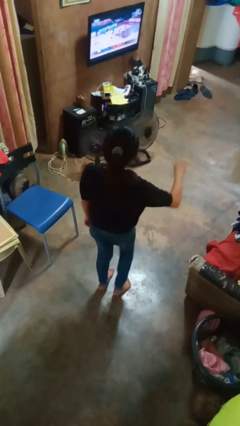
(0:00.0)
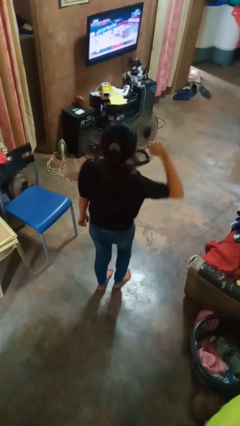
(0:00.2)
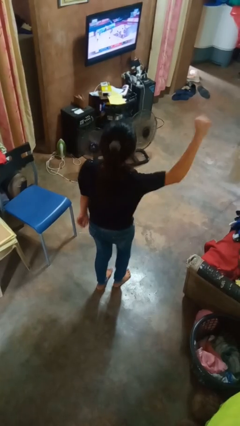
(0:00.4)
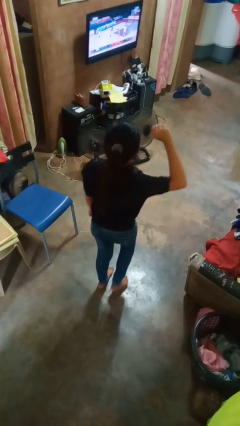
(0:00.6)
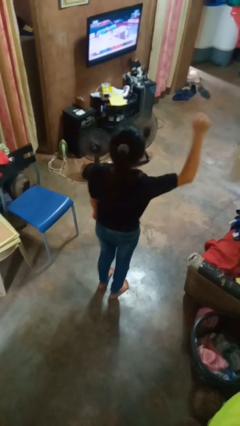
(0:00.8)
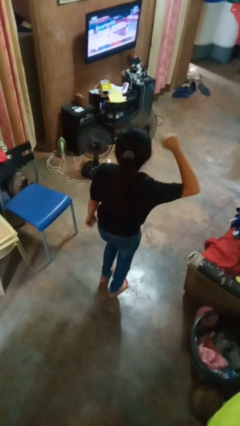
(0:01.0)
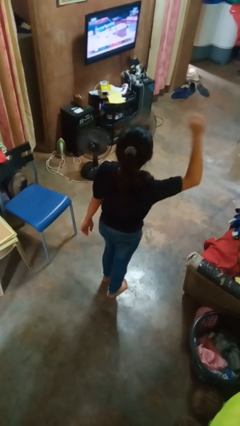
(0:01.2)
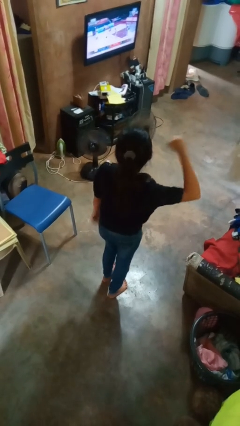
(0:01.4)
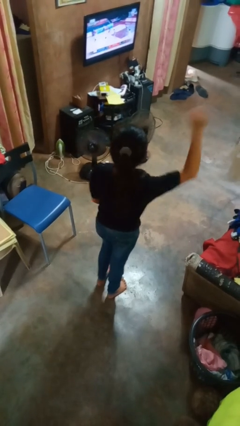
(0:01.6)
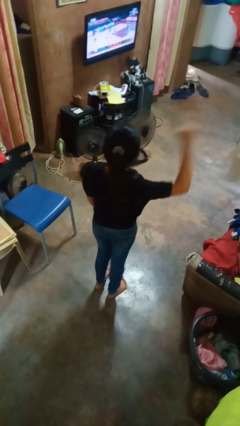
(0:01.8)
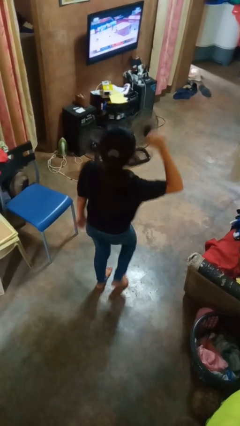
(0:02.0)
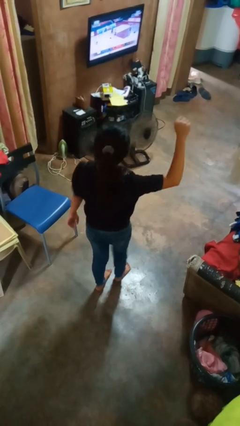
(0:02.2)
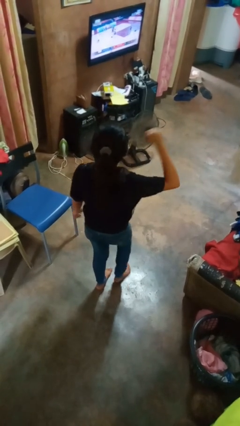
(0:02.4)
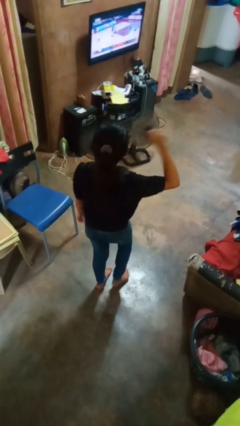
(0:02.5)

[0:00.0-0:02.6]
person dances in place

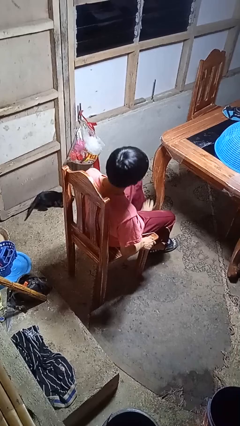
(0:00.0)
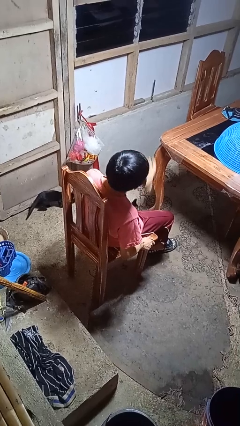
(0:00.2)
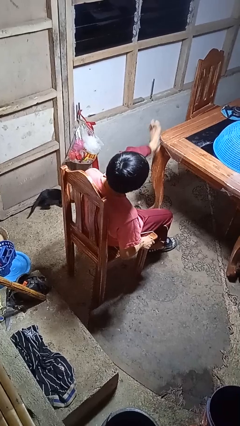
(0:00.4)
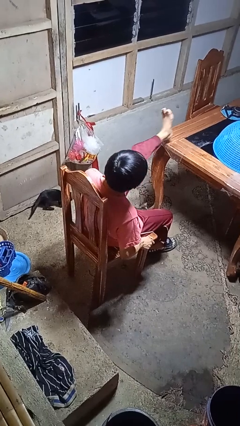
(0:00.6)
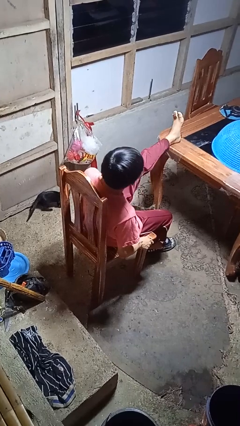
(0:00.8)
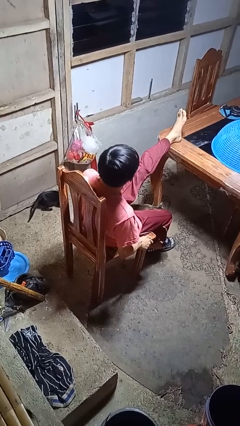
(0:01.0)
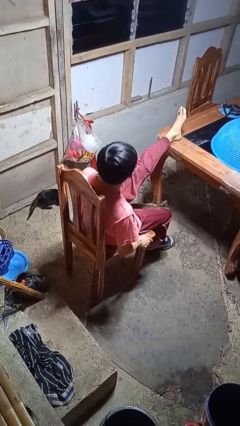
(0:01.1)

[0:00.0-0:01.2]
person puts feet up

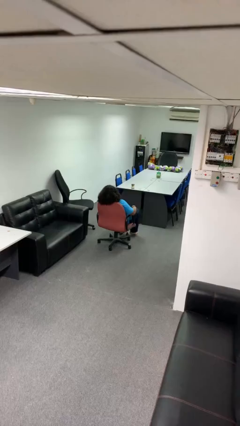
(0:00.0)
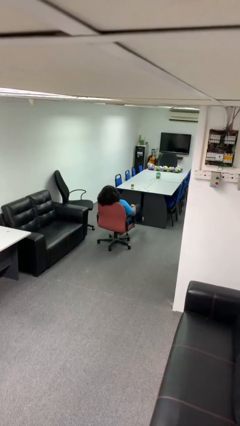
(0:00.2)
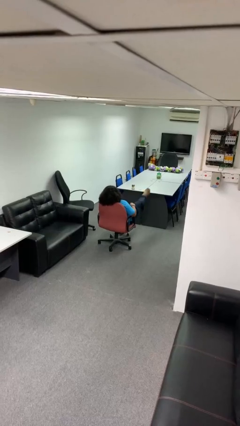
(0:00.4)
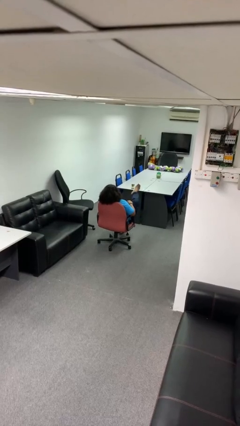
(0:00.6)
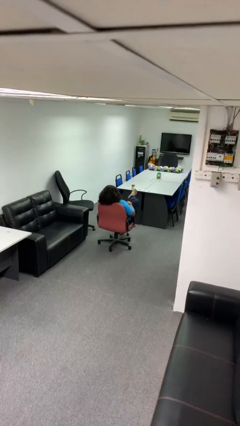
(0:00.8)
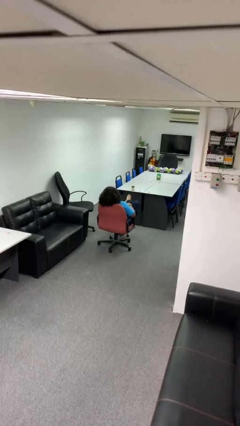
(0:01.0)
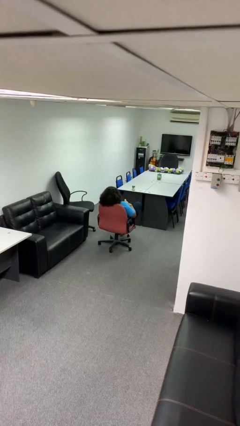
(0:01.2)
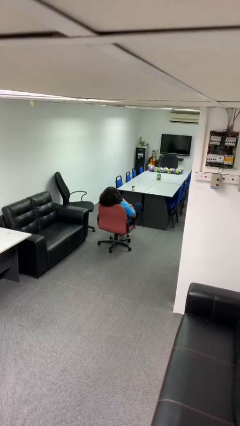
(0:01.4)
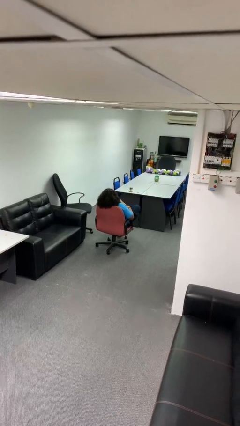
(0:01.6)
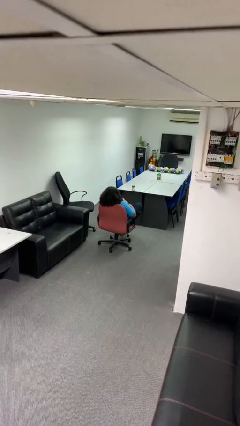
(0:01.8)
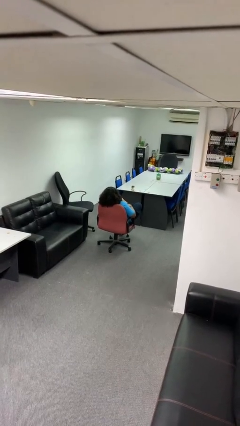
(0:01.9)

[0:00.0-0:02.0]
person crosses legs

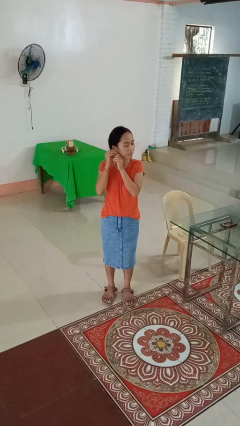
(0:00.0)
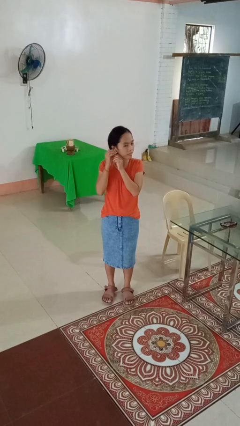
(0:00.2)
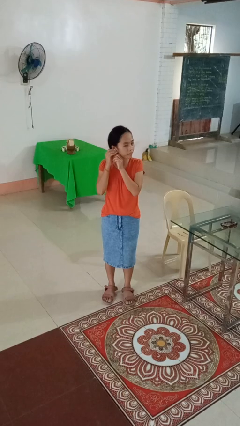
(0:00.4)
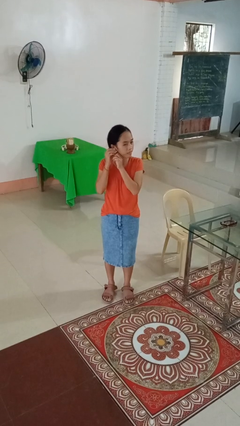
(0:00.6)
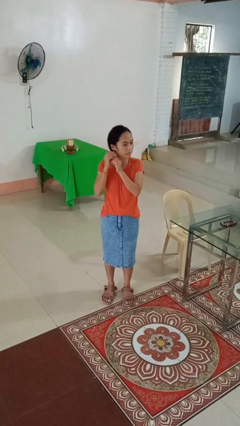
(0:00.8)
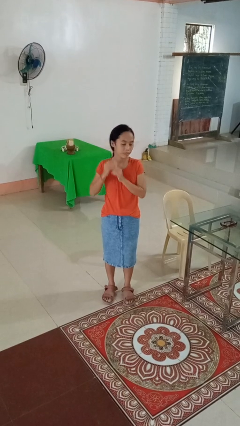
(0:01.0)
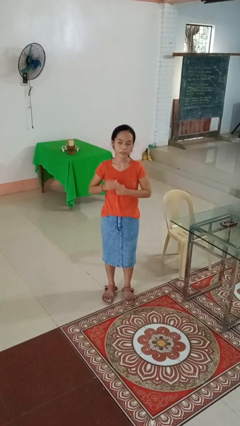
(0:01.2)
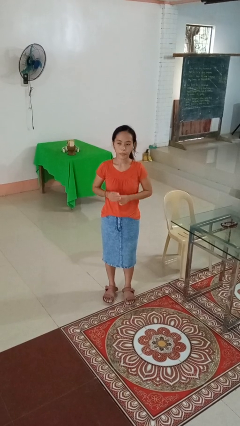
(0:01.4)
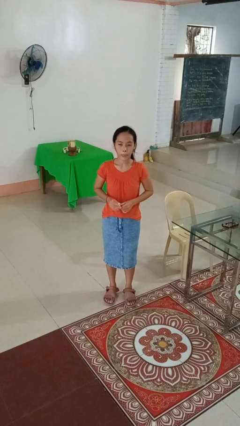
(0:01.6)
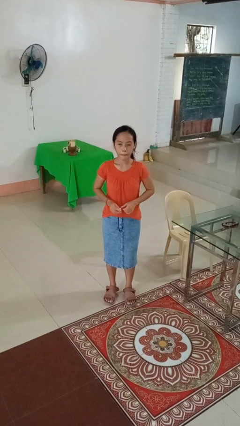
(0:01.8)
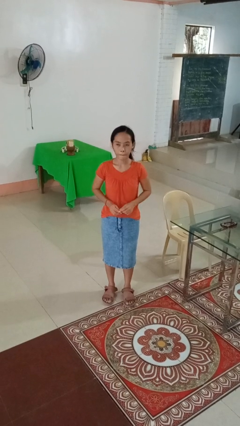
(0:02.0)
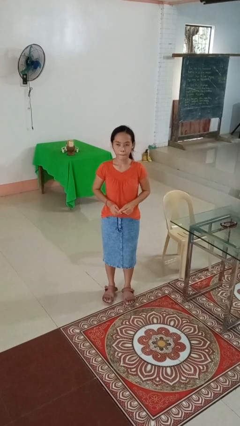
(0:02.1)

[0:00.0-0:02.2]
person takes off earrings

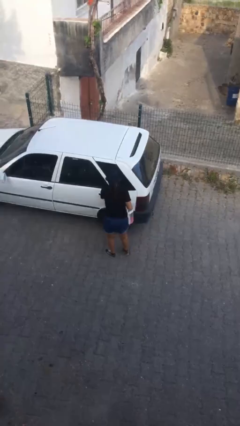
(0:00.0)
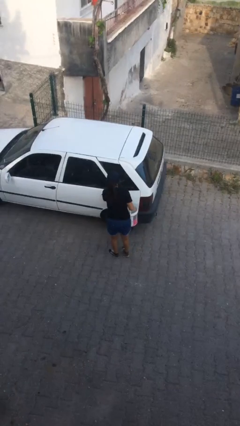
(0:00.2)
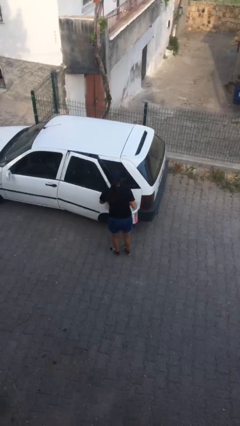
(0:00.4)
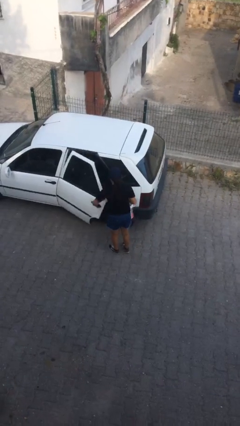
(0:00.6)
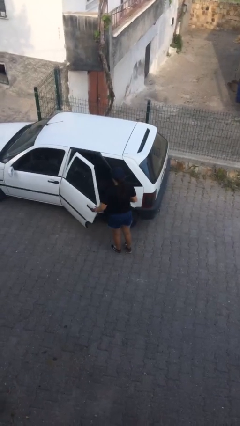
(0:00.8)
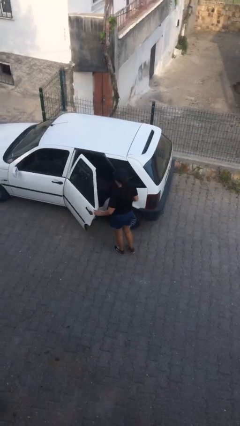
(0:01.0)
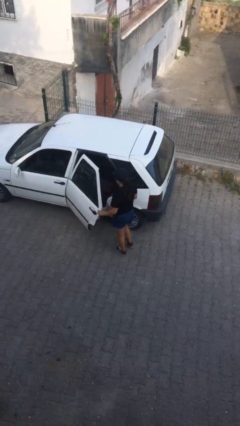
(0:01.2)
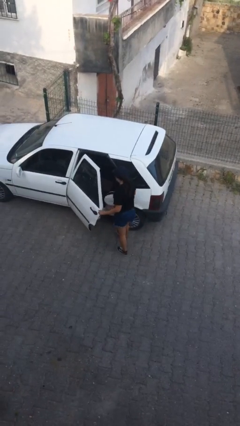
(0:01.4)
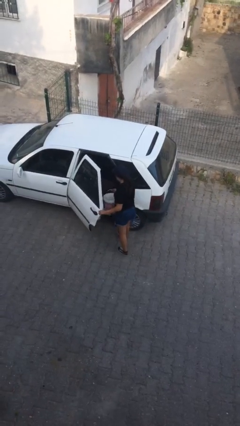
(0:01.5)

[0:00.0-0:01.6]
person opens car door

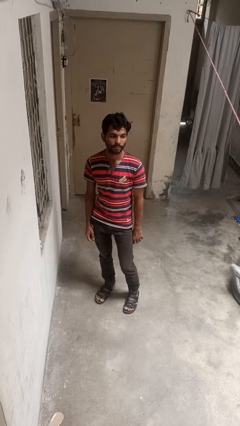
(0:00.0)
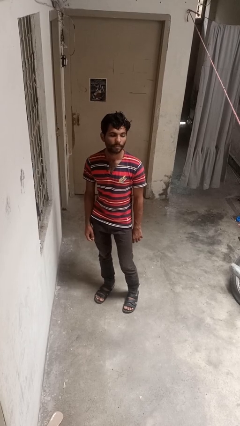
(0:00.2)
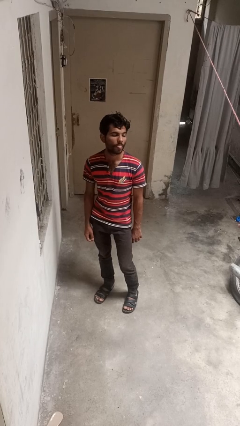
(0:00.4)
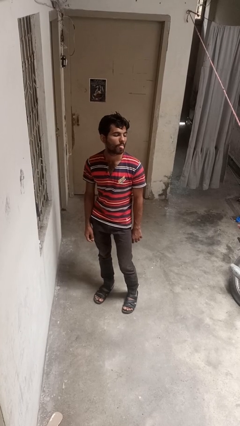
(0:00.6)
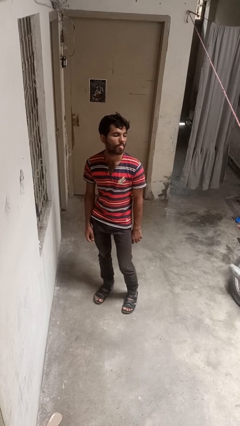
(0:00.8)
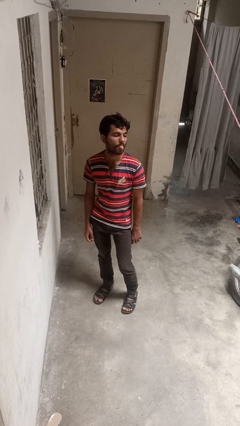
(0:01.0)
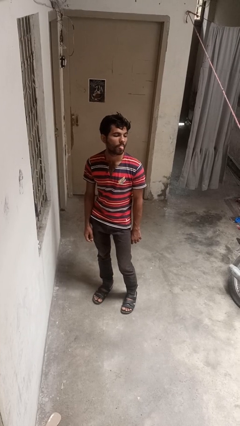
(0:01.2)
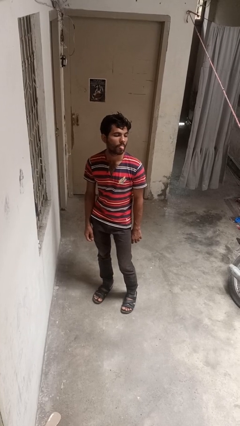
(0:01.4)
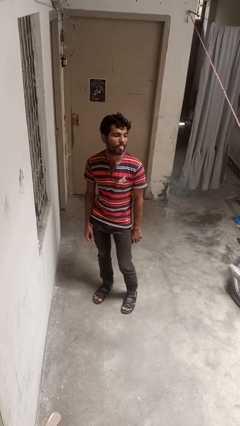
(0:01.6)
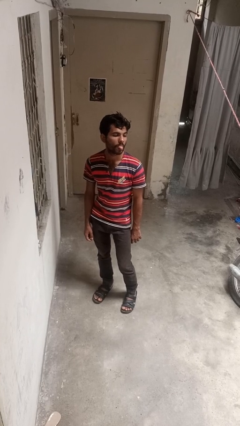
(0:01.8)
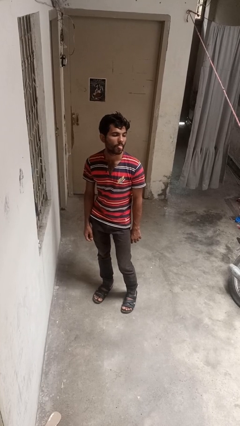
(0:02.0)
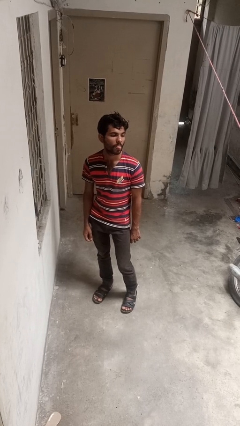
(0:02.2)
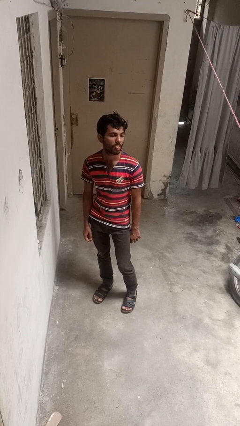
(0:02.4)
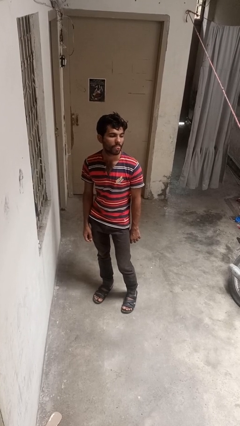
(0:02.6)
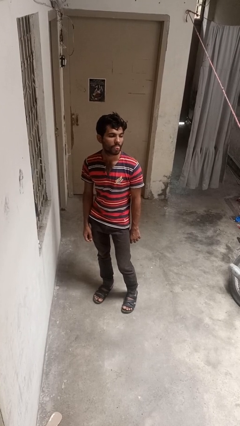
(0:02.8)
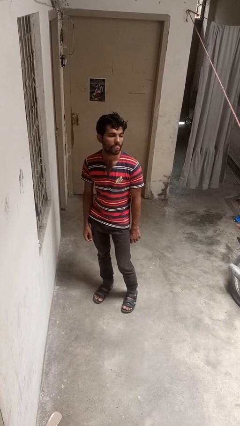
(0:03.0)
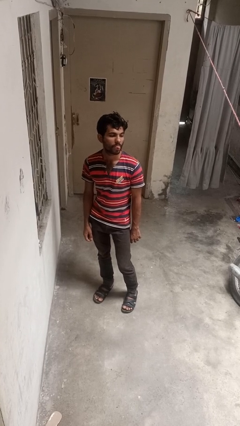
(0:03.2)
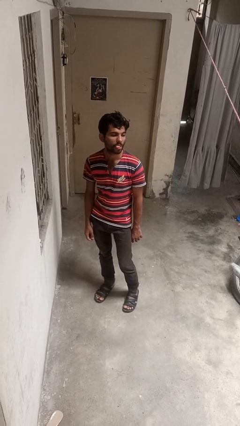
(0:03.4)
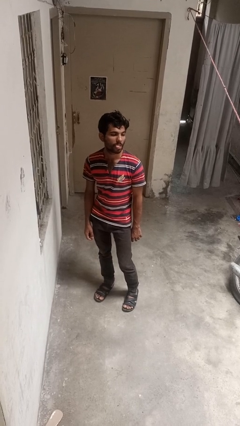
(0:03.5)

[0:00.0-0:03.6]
person sticks out tongue

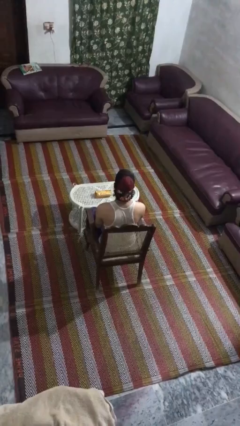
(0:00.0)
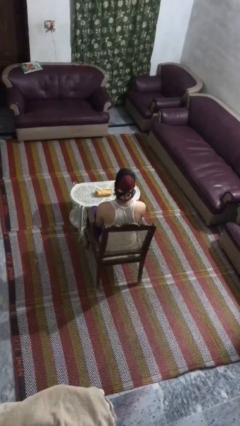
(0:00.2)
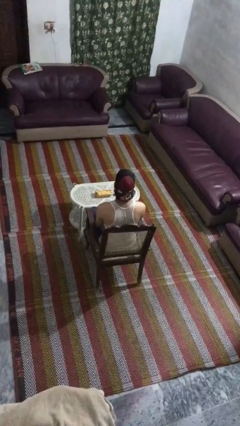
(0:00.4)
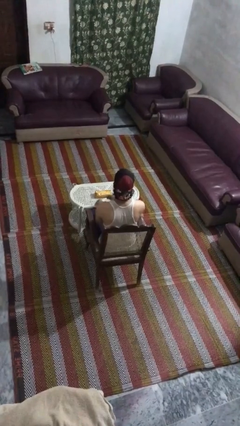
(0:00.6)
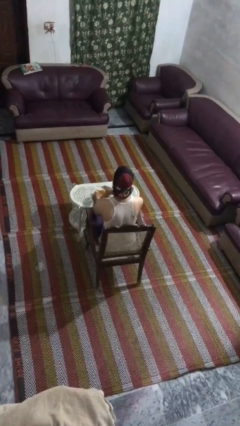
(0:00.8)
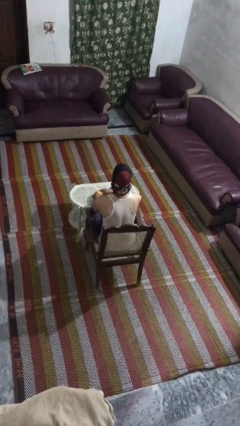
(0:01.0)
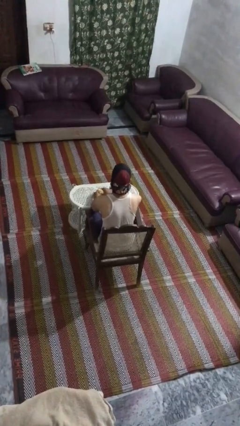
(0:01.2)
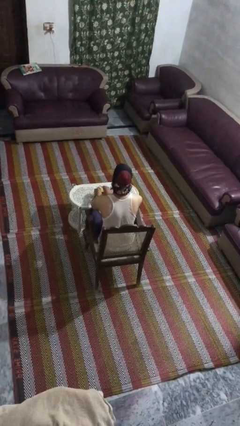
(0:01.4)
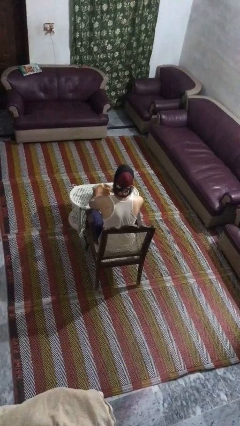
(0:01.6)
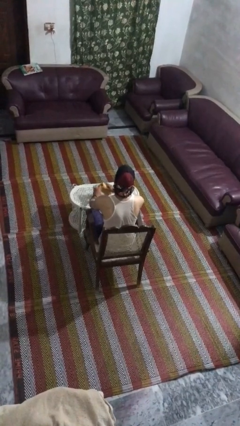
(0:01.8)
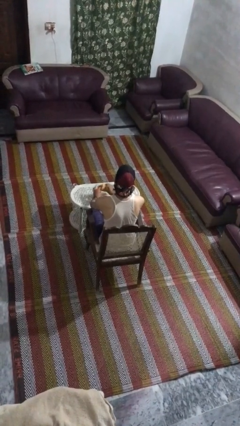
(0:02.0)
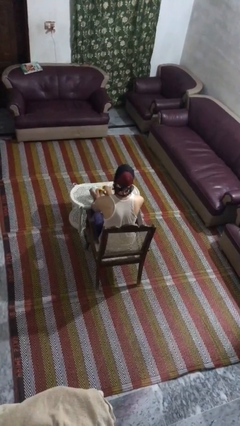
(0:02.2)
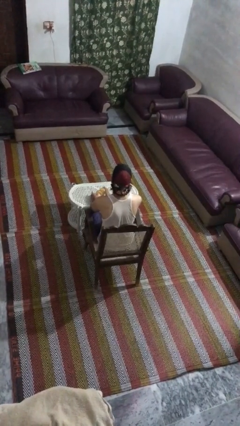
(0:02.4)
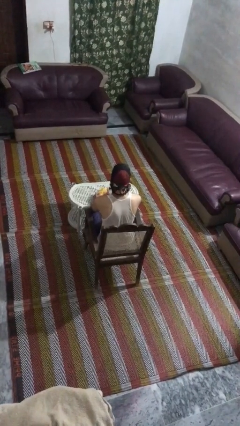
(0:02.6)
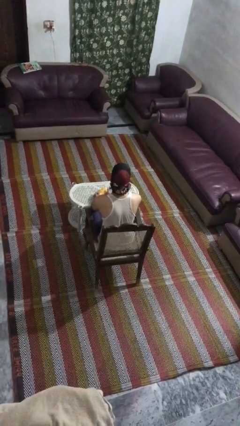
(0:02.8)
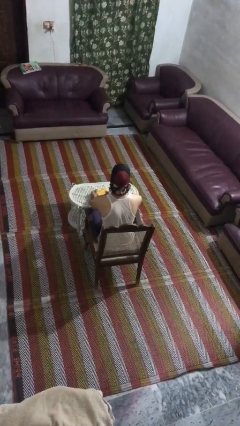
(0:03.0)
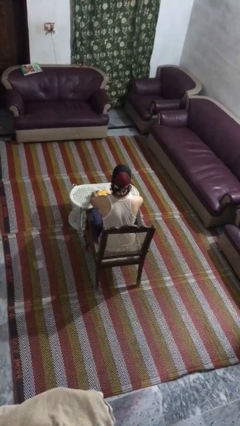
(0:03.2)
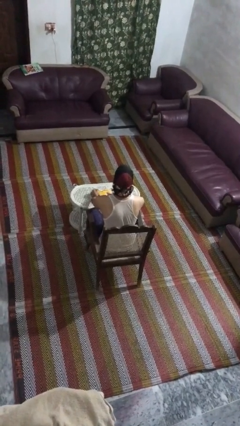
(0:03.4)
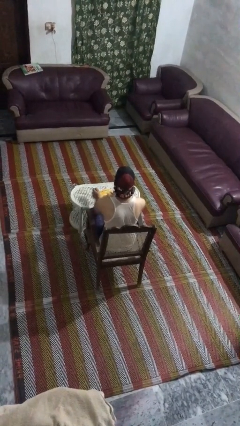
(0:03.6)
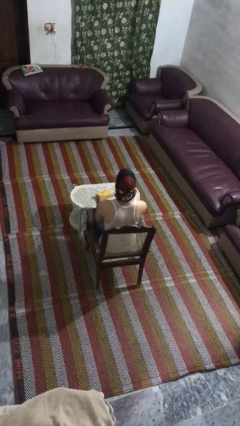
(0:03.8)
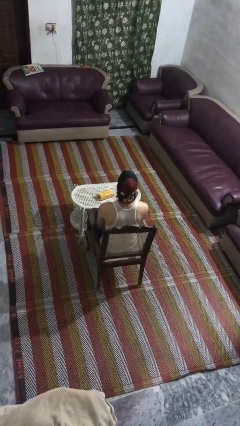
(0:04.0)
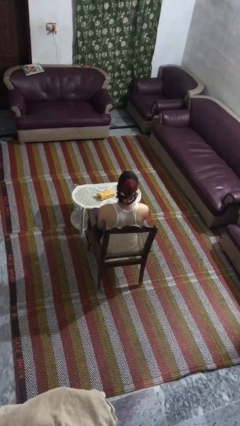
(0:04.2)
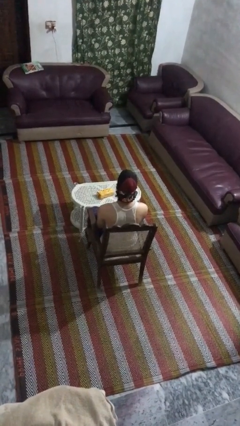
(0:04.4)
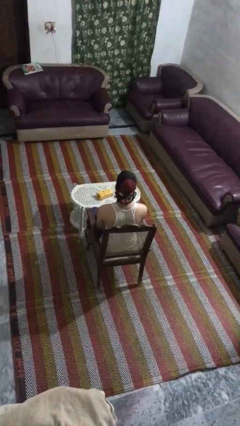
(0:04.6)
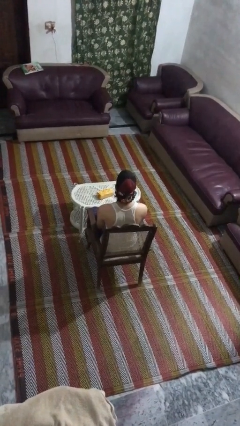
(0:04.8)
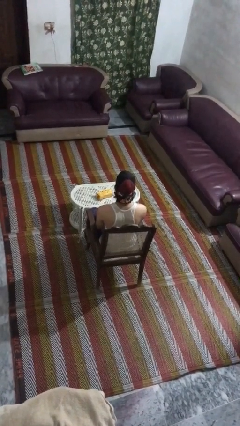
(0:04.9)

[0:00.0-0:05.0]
person wraps box
